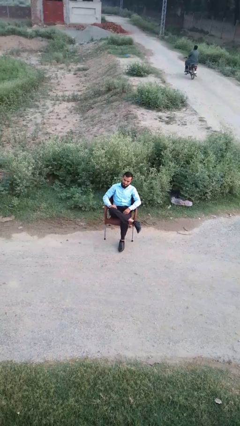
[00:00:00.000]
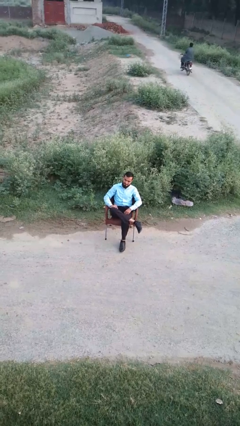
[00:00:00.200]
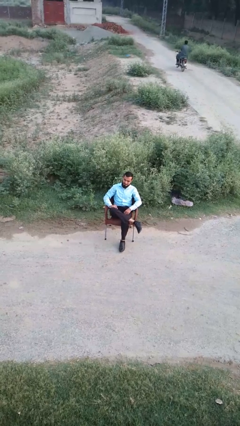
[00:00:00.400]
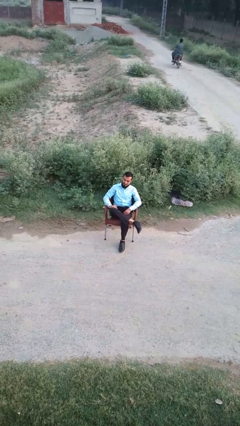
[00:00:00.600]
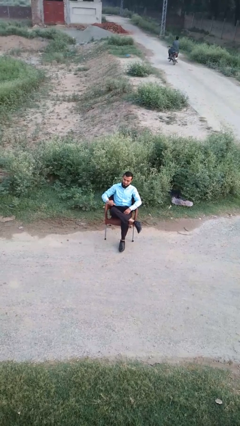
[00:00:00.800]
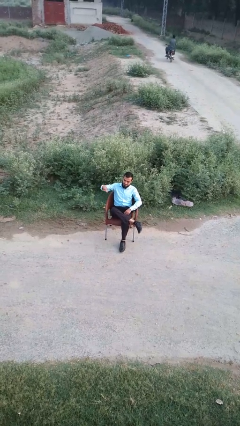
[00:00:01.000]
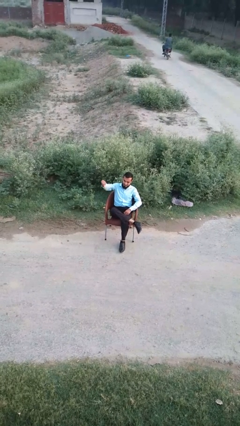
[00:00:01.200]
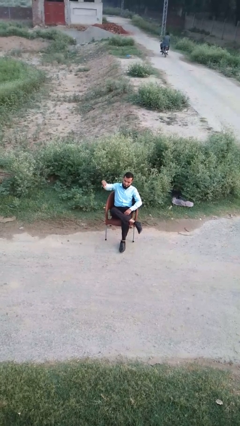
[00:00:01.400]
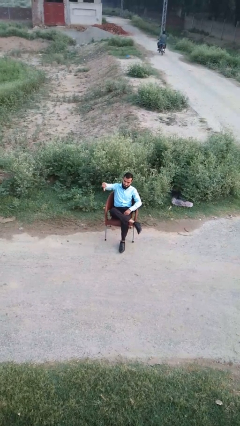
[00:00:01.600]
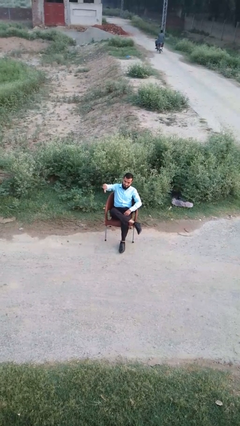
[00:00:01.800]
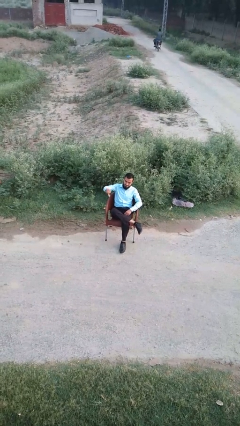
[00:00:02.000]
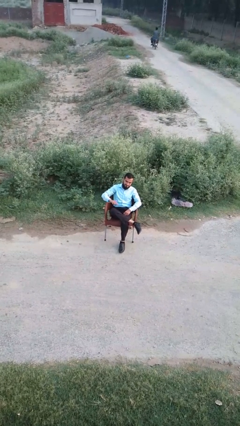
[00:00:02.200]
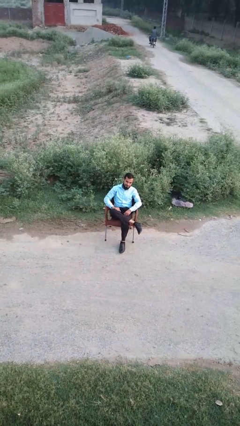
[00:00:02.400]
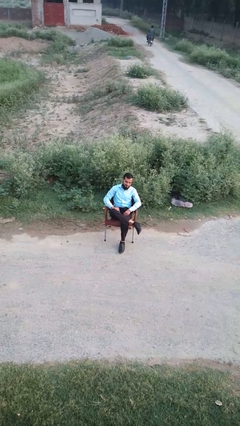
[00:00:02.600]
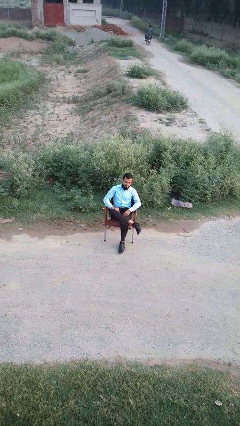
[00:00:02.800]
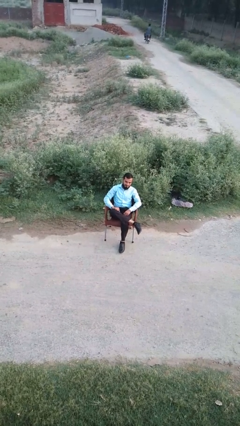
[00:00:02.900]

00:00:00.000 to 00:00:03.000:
person gestures thumbs down

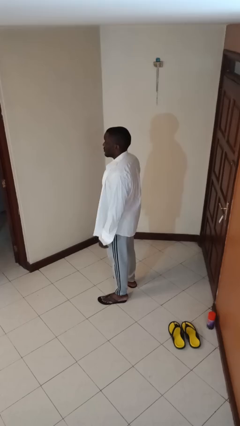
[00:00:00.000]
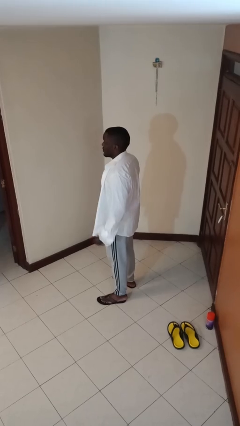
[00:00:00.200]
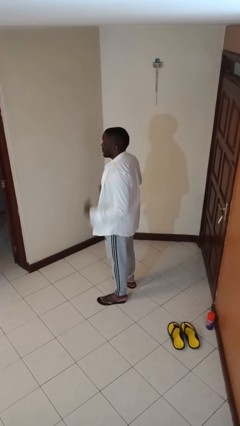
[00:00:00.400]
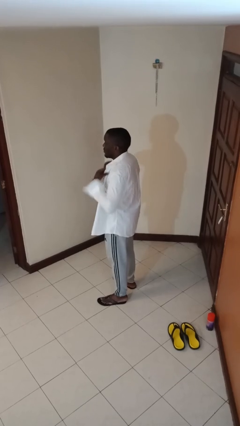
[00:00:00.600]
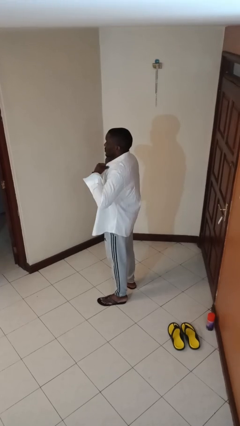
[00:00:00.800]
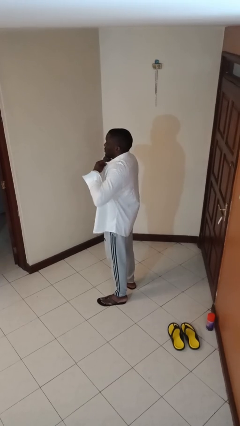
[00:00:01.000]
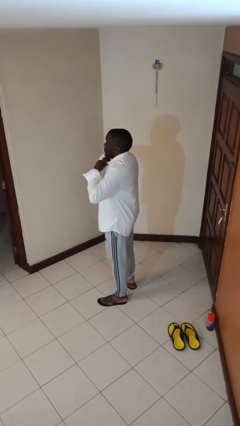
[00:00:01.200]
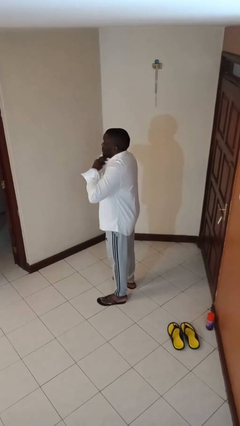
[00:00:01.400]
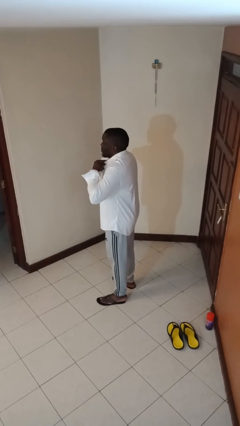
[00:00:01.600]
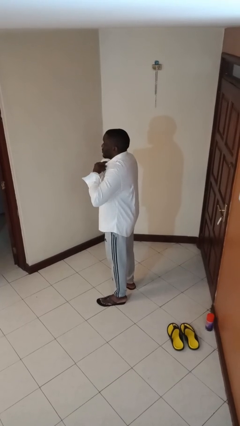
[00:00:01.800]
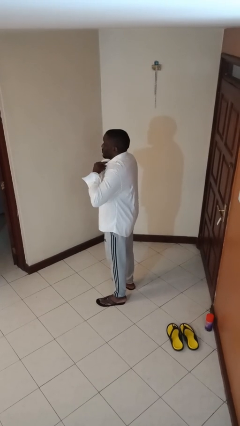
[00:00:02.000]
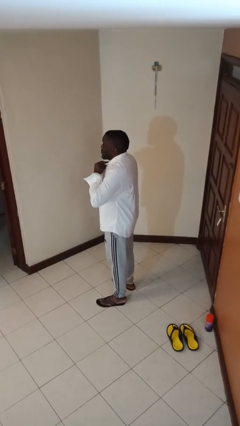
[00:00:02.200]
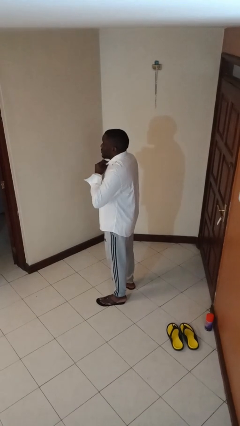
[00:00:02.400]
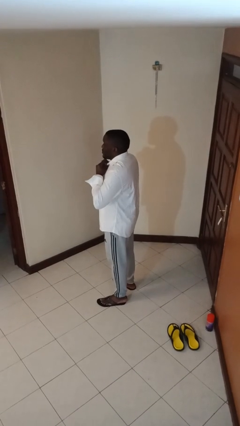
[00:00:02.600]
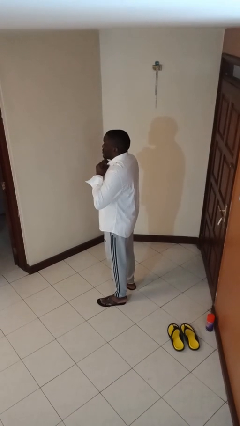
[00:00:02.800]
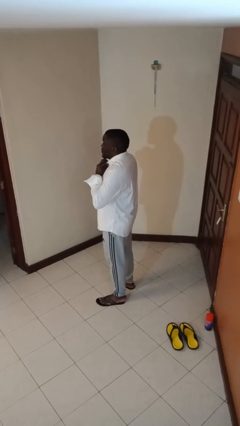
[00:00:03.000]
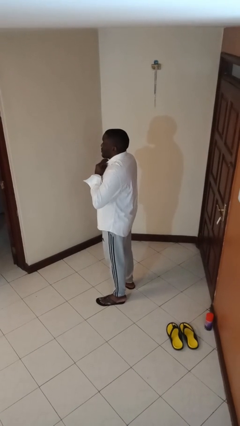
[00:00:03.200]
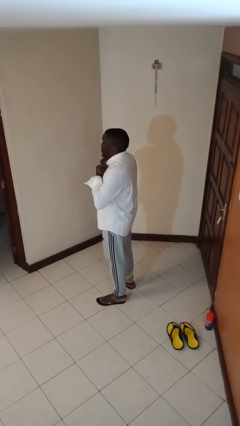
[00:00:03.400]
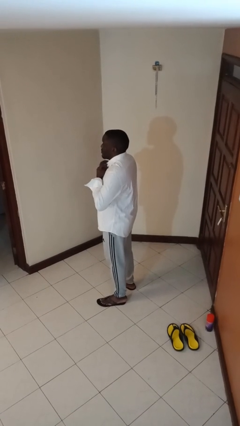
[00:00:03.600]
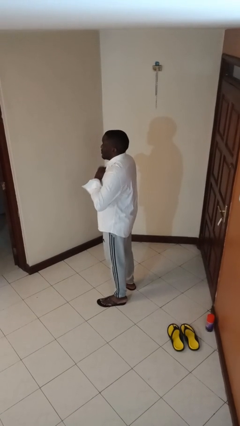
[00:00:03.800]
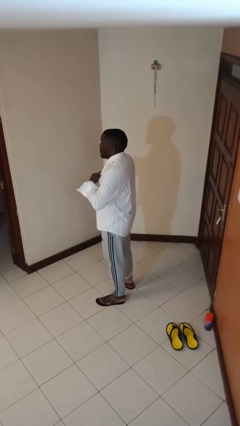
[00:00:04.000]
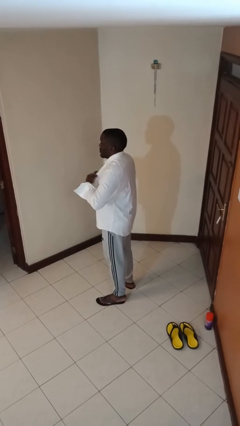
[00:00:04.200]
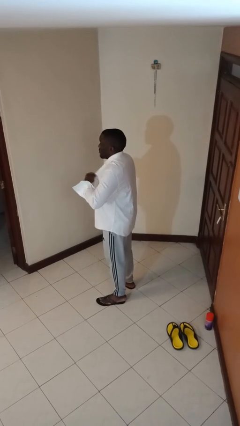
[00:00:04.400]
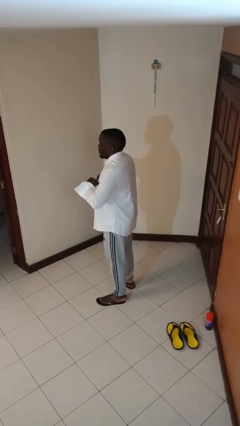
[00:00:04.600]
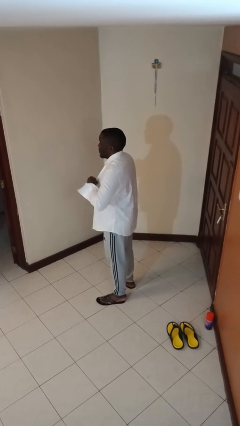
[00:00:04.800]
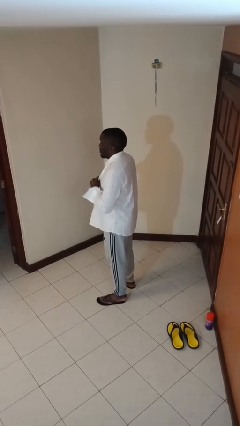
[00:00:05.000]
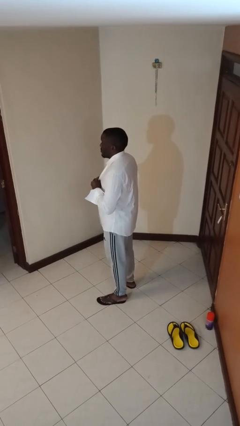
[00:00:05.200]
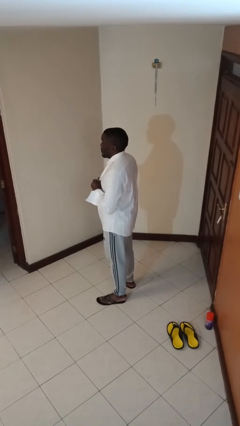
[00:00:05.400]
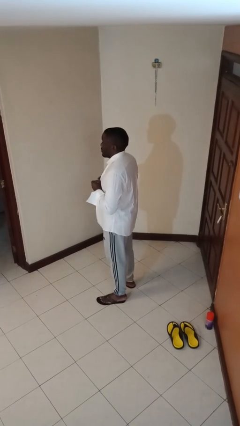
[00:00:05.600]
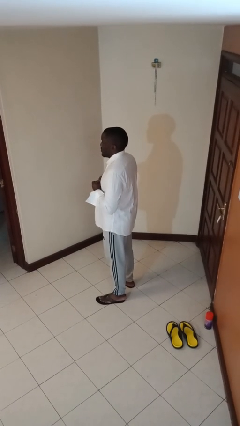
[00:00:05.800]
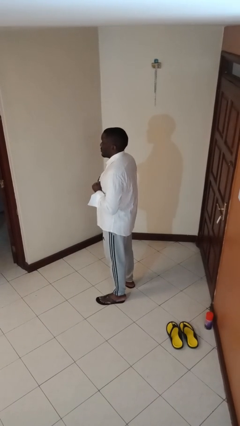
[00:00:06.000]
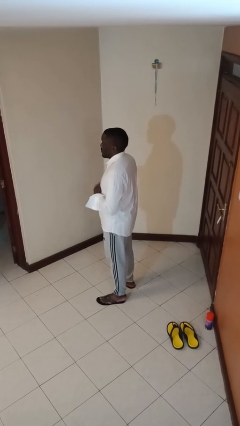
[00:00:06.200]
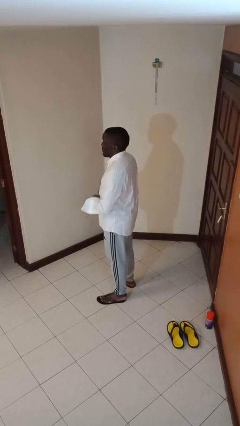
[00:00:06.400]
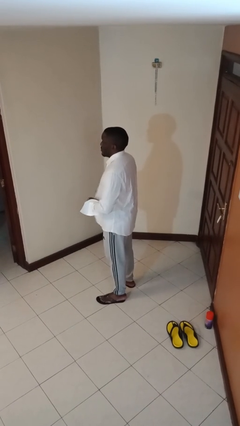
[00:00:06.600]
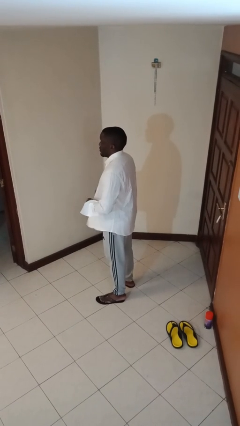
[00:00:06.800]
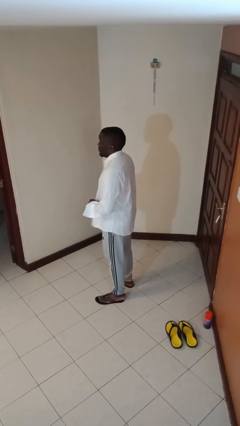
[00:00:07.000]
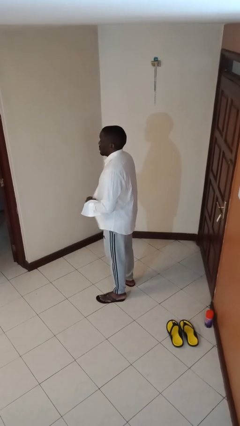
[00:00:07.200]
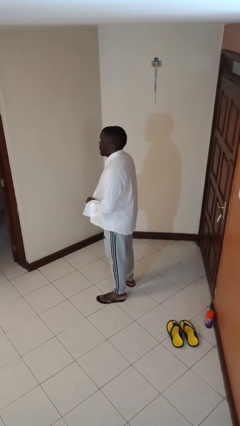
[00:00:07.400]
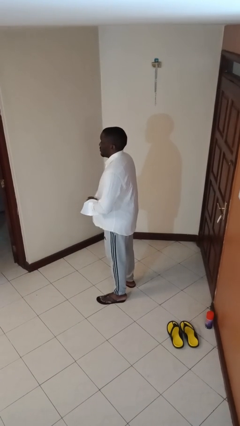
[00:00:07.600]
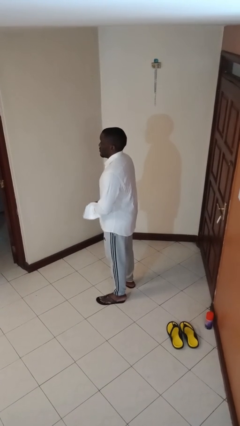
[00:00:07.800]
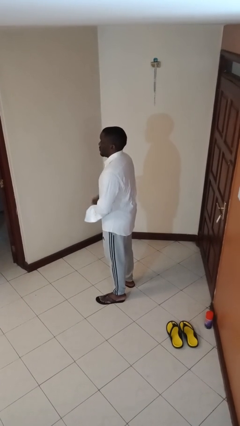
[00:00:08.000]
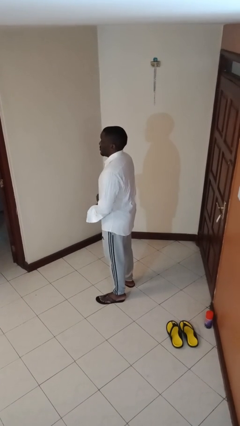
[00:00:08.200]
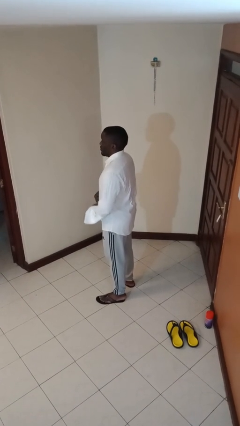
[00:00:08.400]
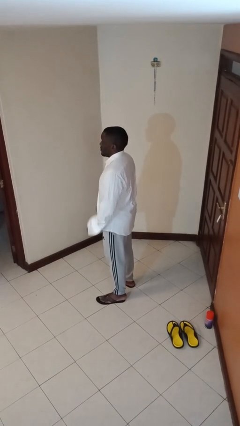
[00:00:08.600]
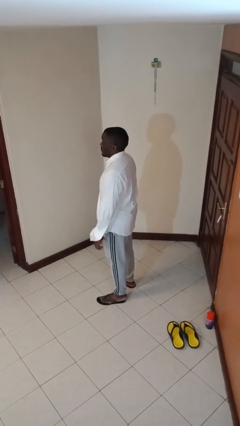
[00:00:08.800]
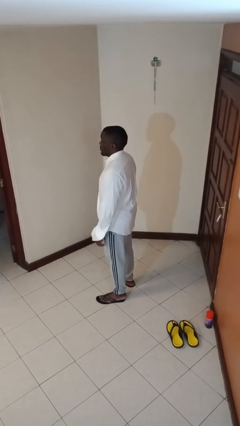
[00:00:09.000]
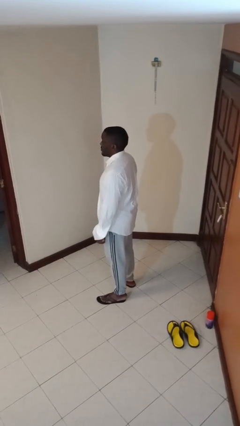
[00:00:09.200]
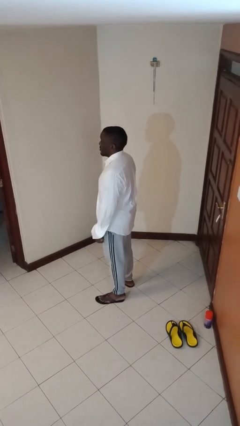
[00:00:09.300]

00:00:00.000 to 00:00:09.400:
person buttons shirt

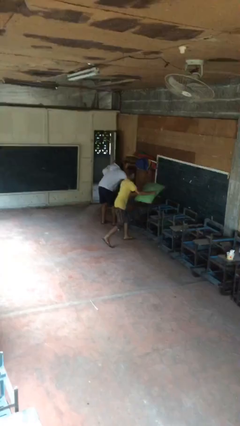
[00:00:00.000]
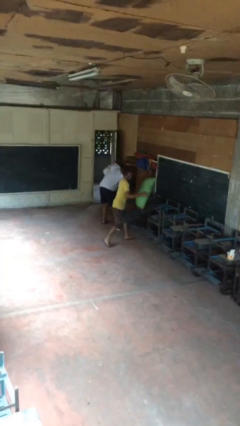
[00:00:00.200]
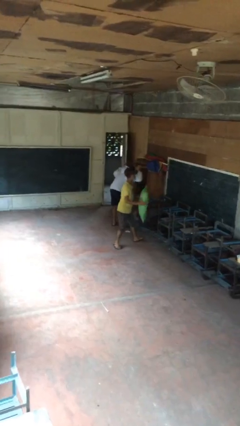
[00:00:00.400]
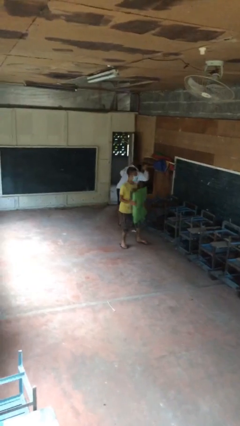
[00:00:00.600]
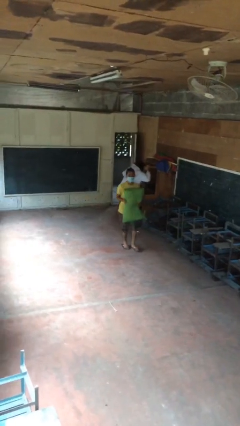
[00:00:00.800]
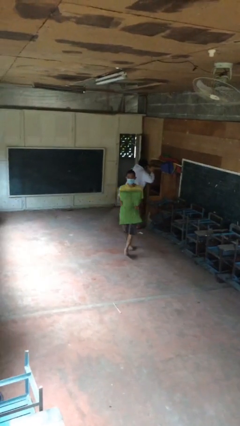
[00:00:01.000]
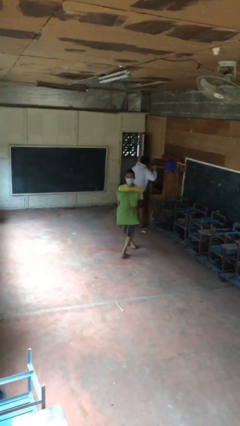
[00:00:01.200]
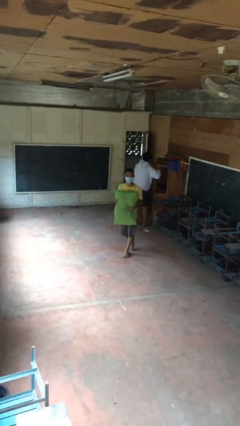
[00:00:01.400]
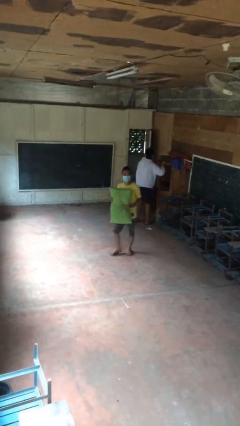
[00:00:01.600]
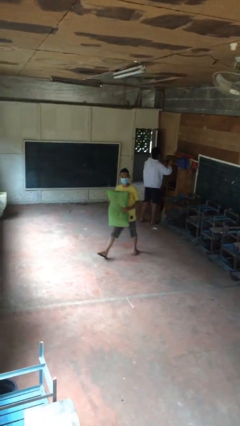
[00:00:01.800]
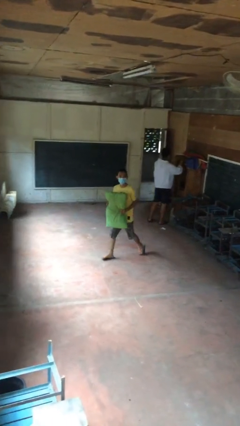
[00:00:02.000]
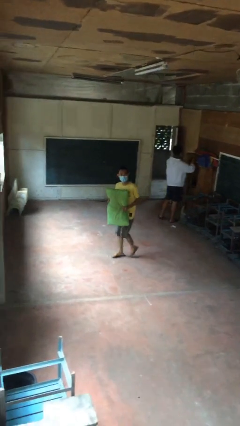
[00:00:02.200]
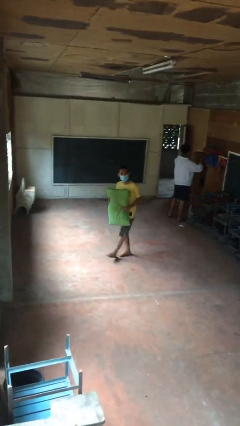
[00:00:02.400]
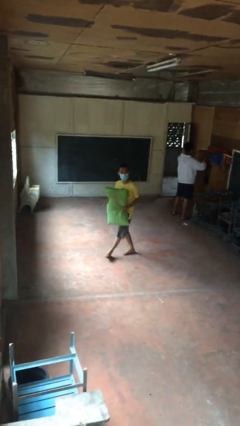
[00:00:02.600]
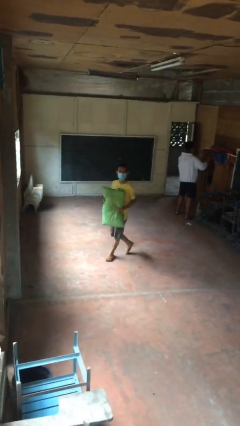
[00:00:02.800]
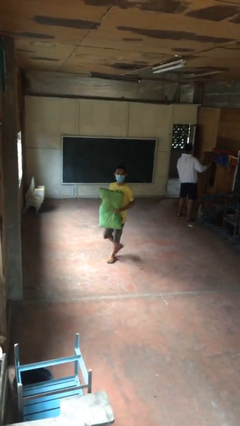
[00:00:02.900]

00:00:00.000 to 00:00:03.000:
person steals object from person

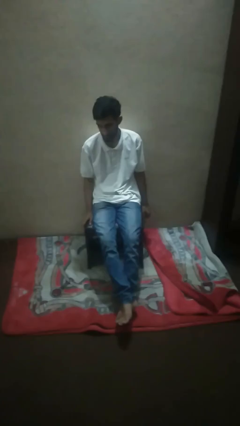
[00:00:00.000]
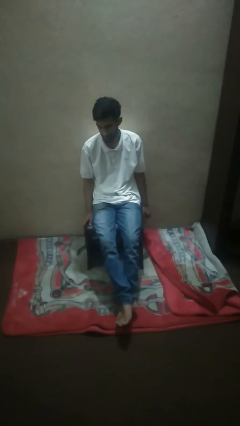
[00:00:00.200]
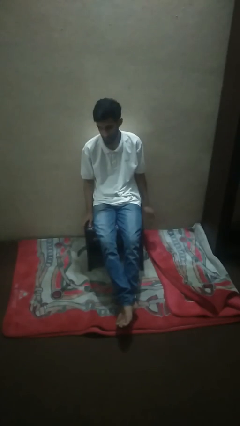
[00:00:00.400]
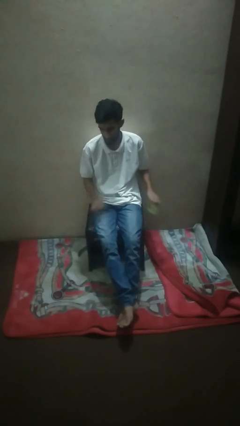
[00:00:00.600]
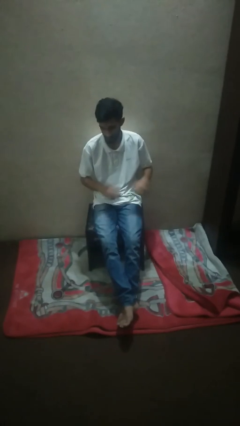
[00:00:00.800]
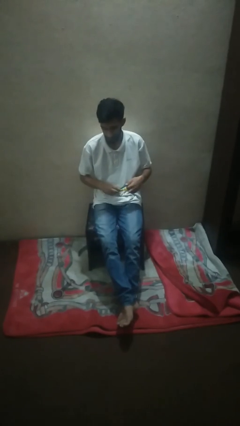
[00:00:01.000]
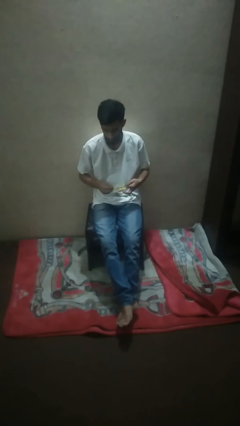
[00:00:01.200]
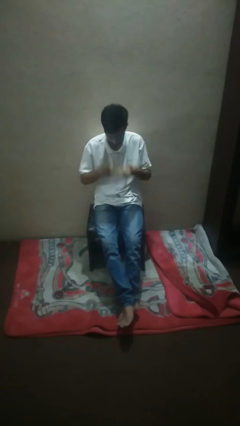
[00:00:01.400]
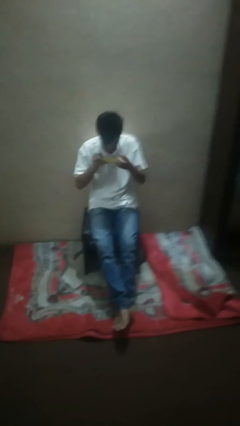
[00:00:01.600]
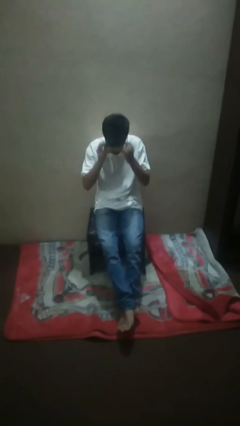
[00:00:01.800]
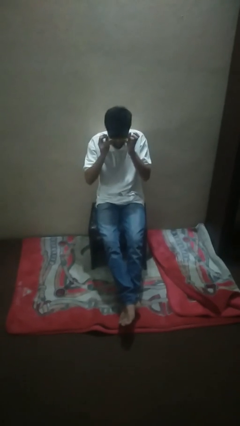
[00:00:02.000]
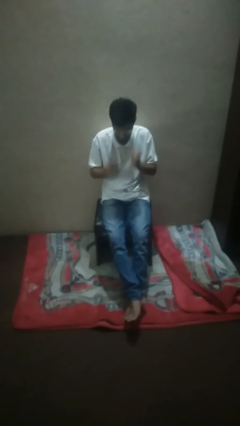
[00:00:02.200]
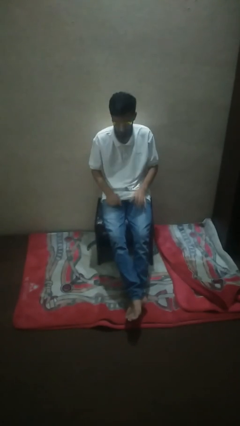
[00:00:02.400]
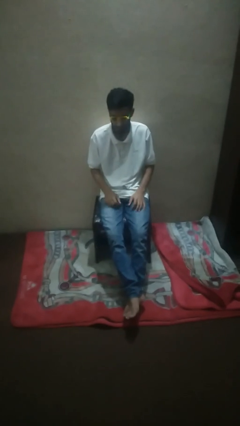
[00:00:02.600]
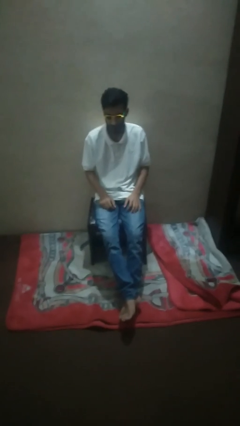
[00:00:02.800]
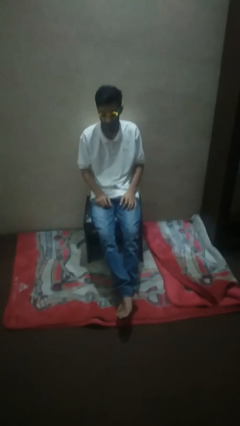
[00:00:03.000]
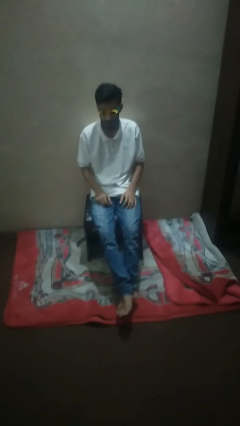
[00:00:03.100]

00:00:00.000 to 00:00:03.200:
person puts on sunglasses
